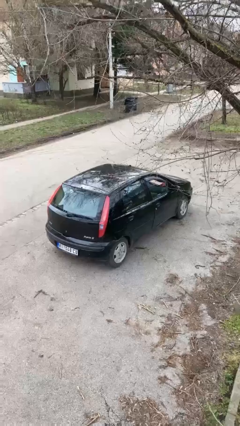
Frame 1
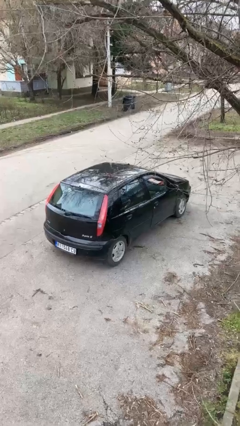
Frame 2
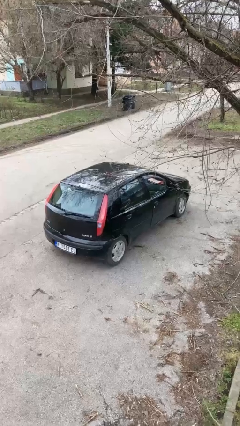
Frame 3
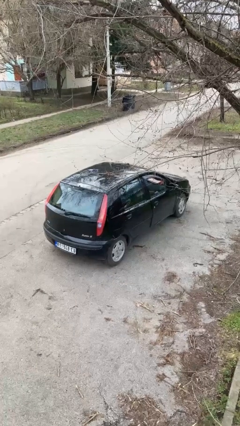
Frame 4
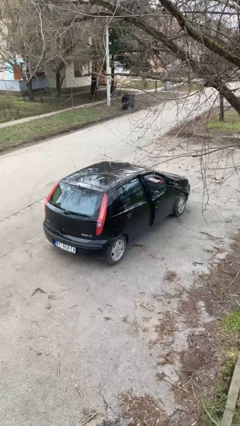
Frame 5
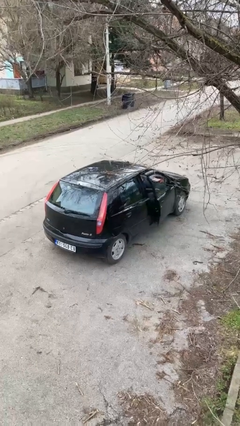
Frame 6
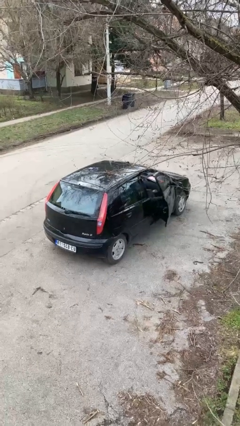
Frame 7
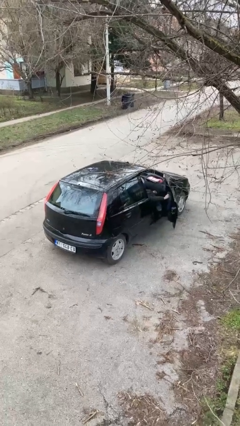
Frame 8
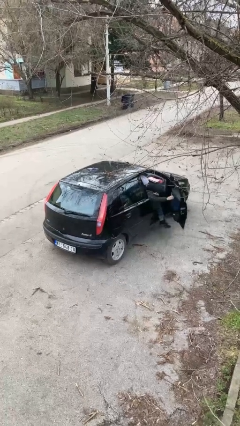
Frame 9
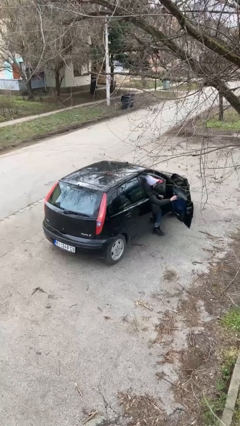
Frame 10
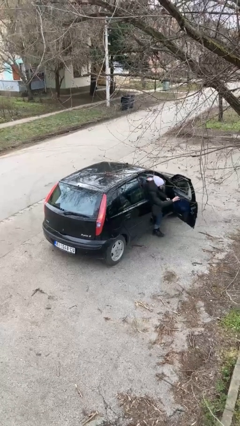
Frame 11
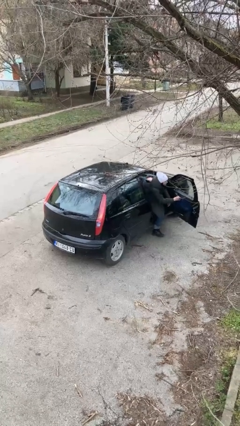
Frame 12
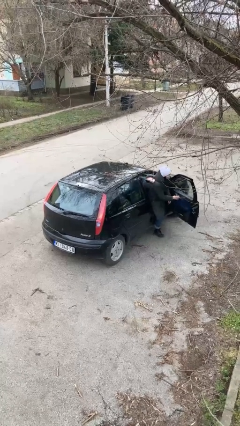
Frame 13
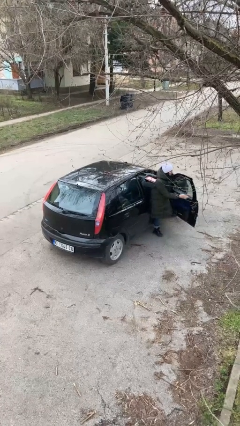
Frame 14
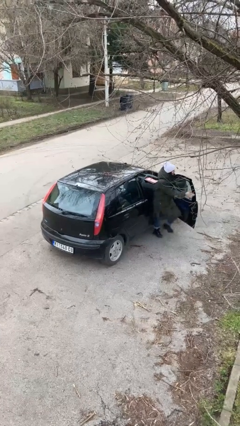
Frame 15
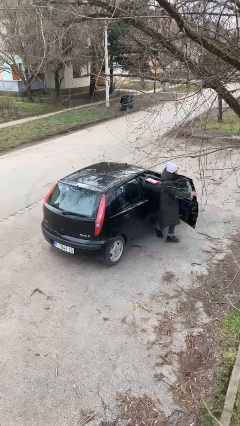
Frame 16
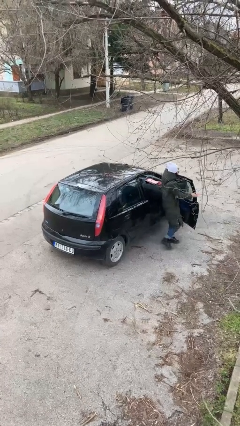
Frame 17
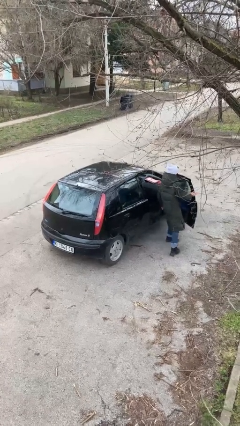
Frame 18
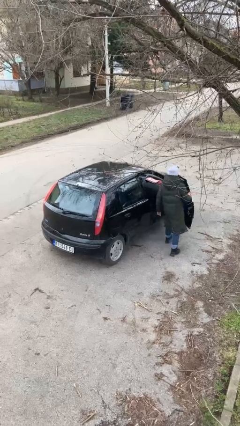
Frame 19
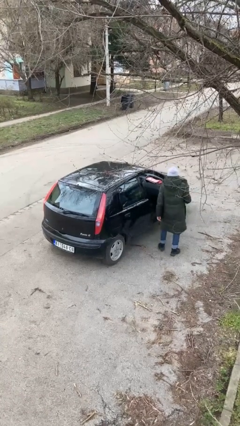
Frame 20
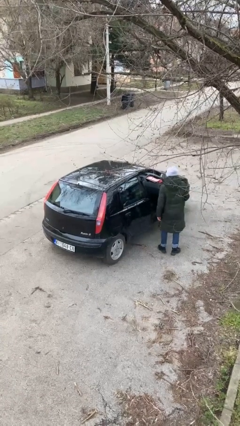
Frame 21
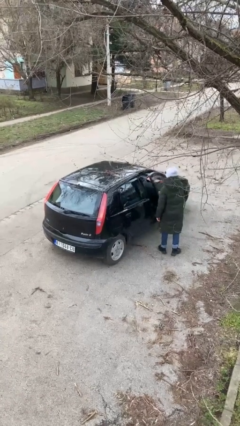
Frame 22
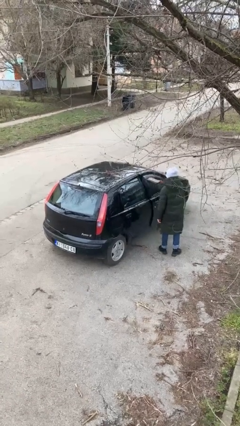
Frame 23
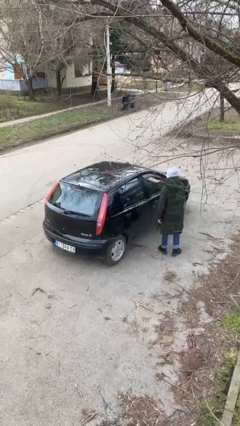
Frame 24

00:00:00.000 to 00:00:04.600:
car drops off person

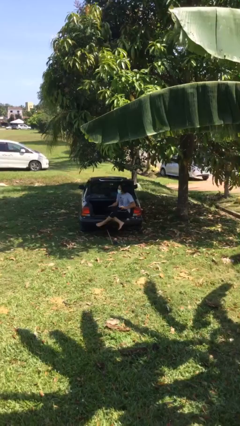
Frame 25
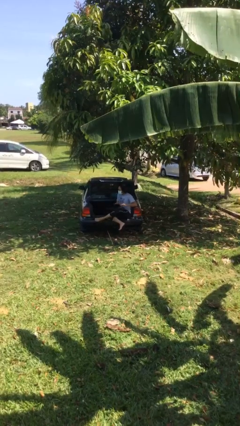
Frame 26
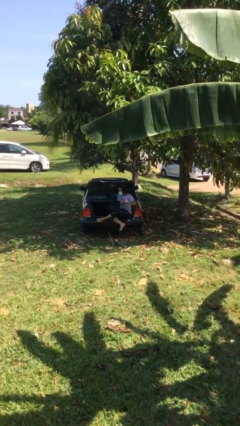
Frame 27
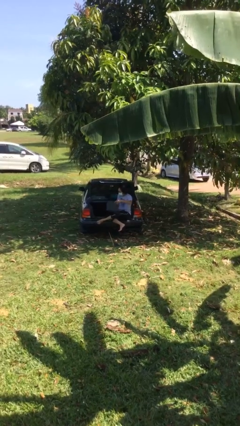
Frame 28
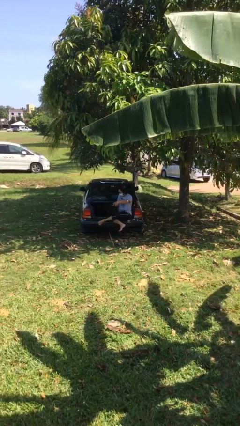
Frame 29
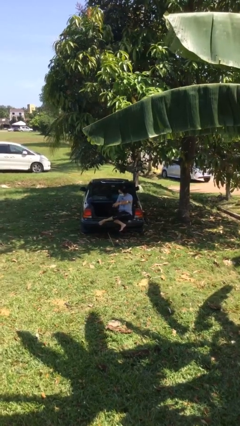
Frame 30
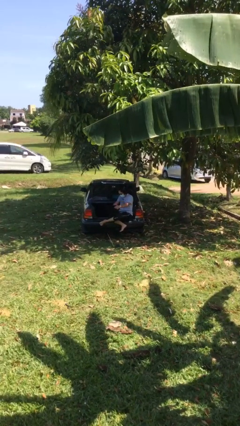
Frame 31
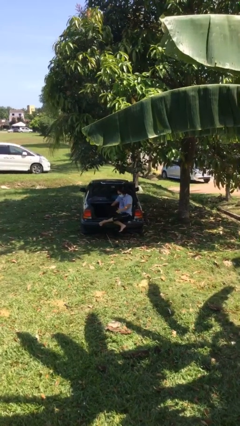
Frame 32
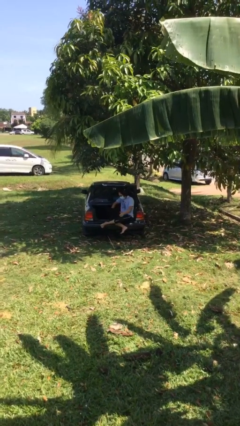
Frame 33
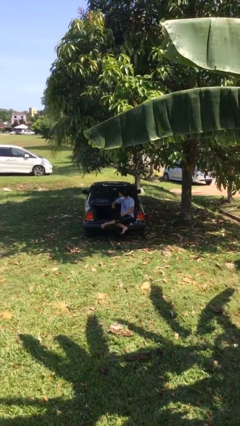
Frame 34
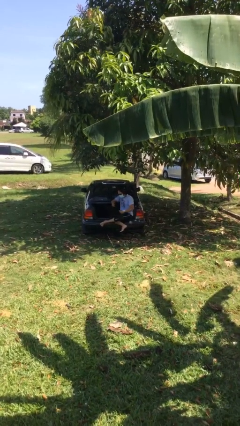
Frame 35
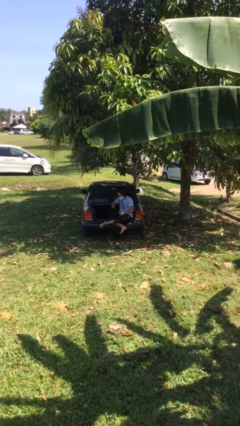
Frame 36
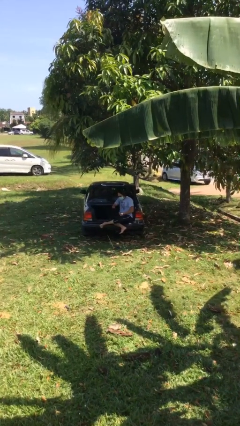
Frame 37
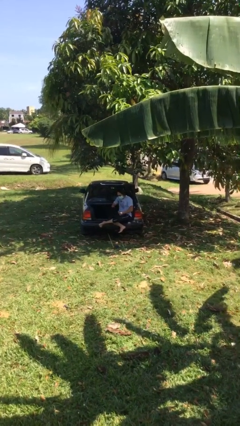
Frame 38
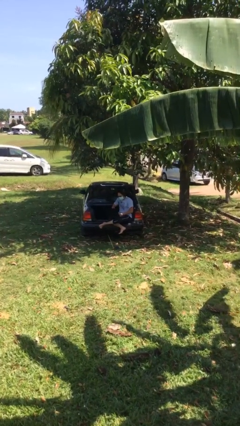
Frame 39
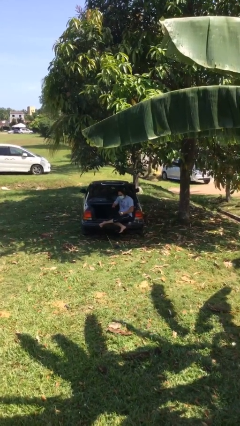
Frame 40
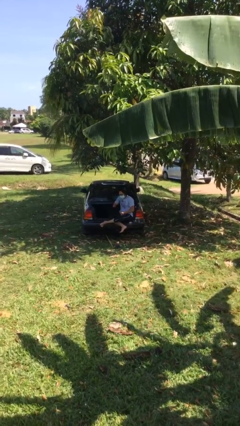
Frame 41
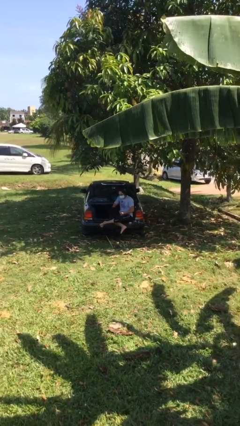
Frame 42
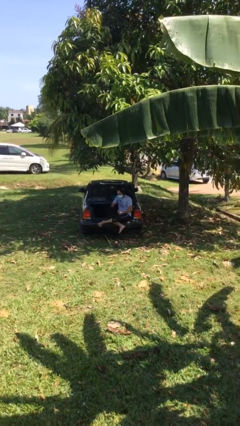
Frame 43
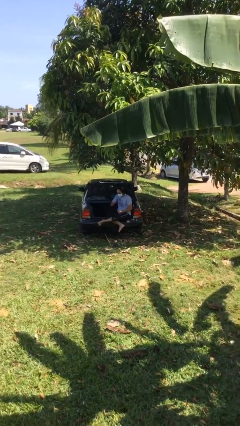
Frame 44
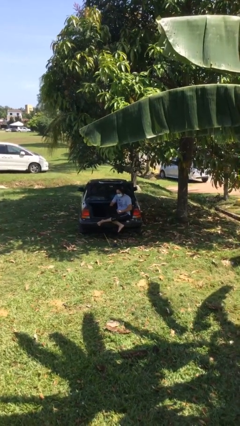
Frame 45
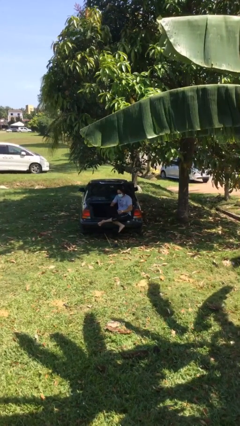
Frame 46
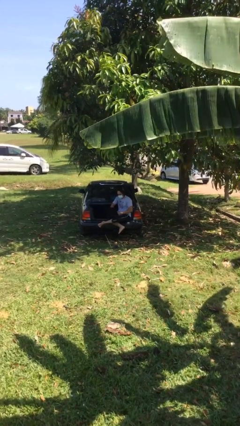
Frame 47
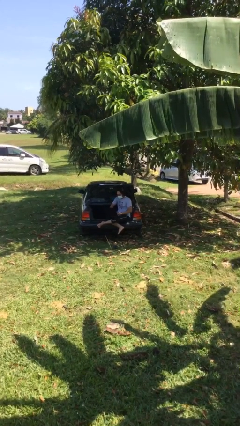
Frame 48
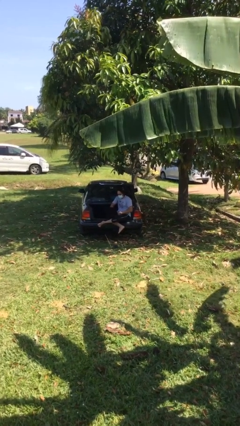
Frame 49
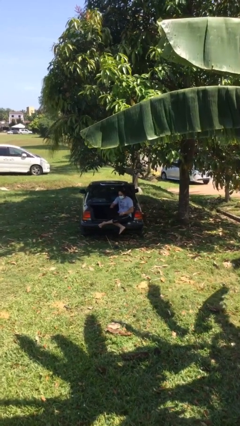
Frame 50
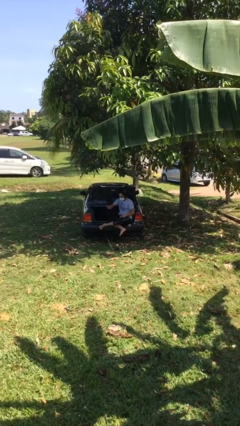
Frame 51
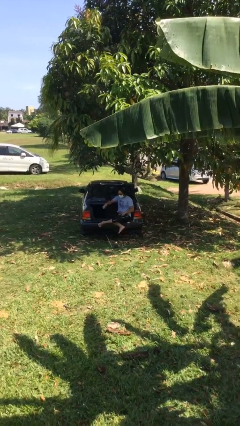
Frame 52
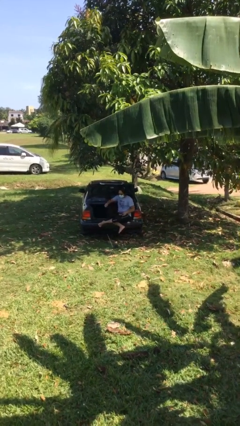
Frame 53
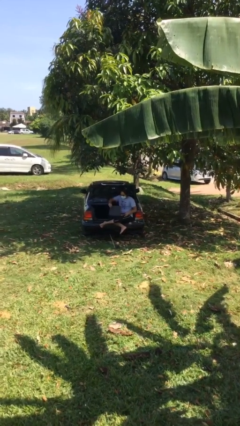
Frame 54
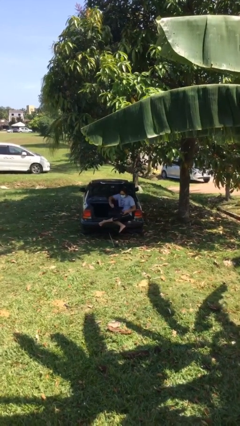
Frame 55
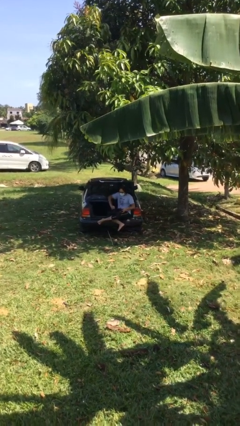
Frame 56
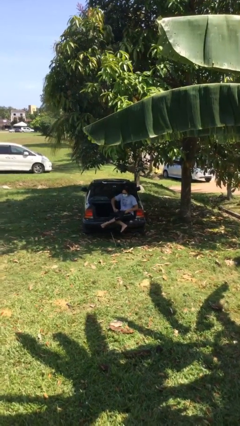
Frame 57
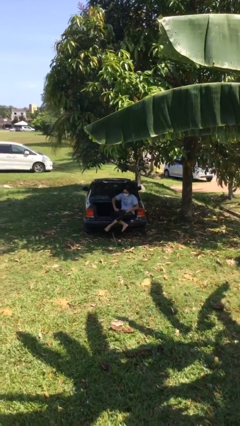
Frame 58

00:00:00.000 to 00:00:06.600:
person interacts with laptop

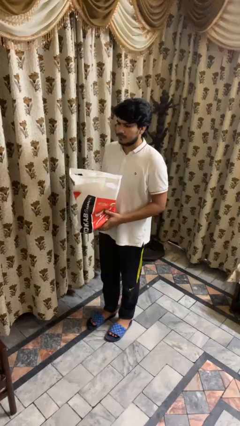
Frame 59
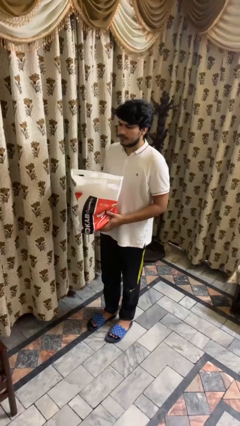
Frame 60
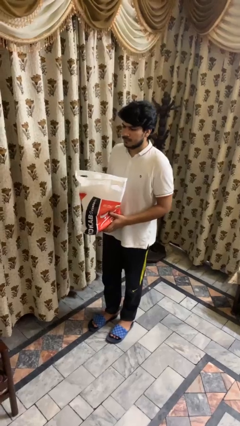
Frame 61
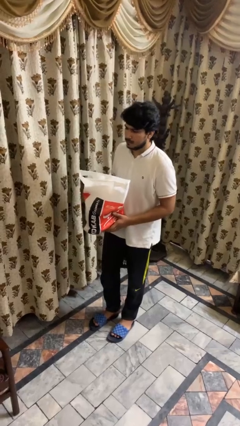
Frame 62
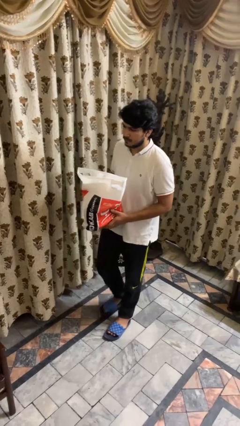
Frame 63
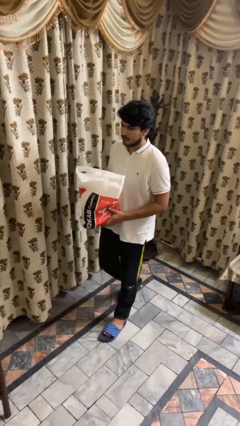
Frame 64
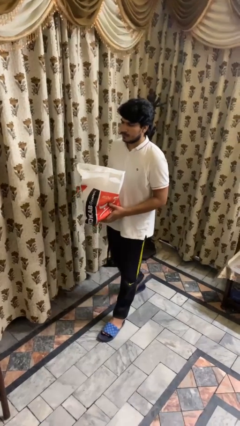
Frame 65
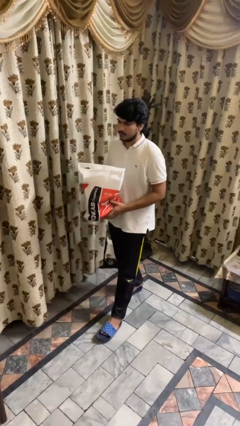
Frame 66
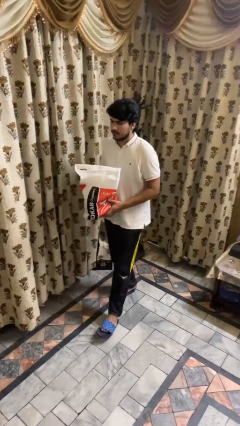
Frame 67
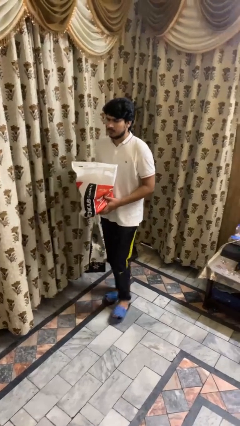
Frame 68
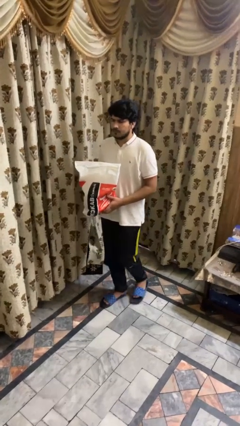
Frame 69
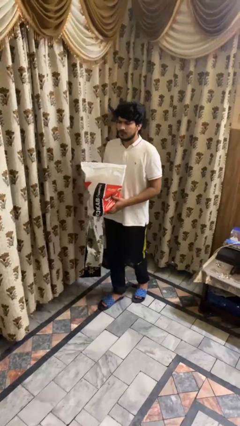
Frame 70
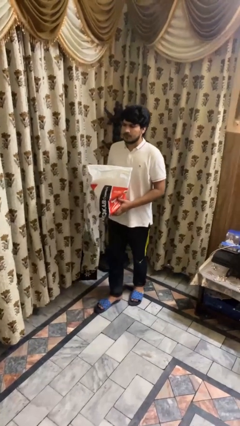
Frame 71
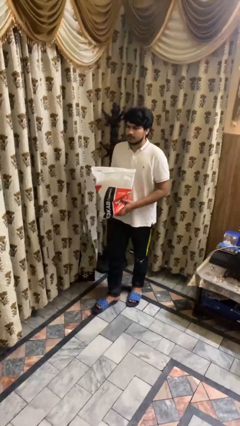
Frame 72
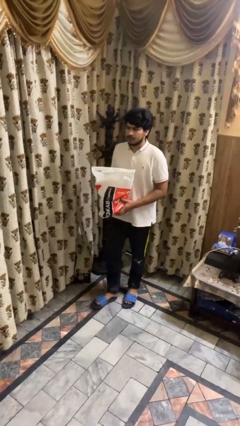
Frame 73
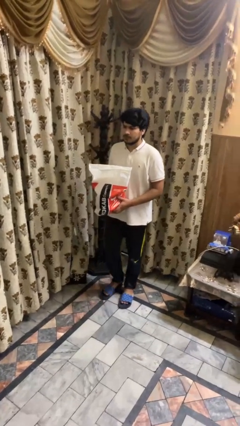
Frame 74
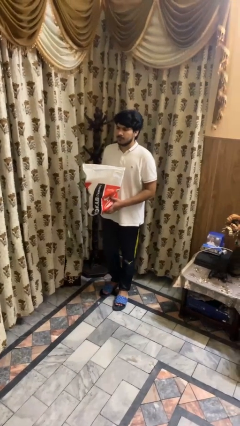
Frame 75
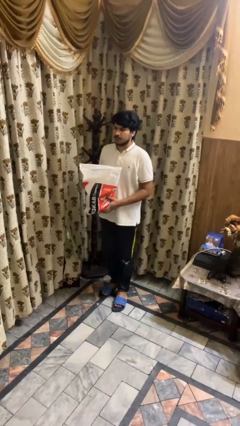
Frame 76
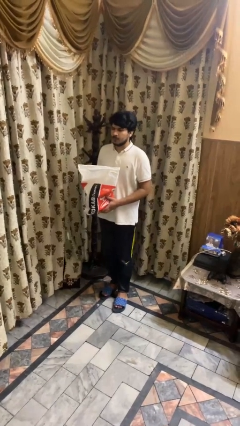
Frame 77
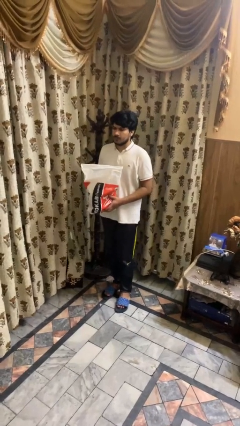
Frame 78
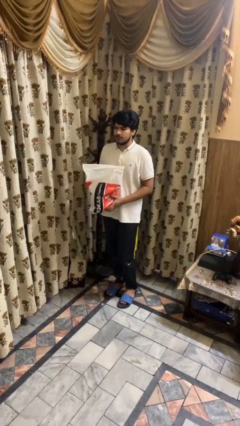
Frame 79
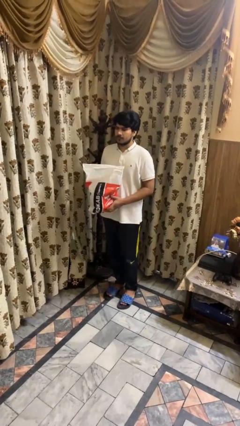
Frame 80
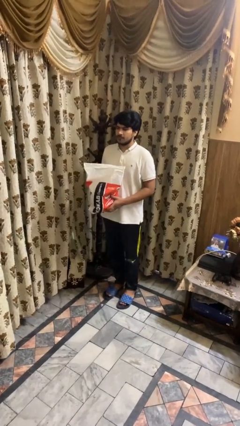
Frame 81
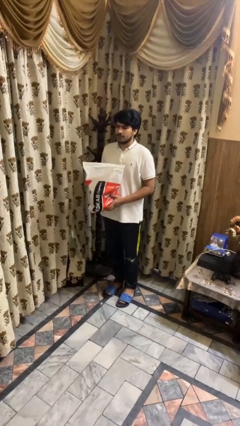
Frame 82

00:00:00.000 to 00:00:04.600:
person carries groceries

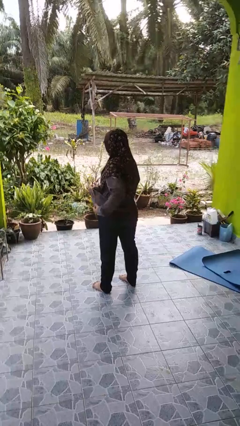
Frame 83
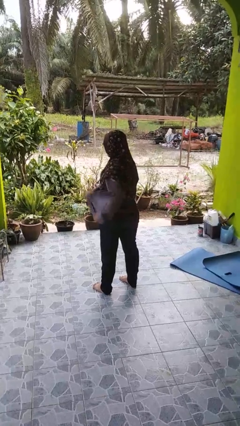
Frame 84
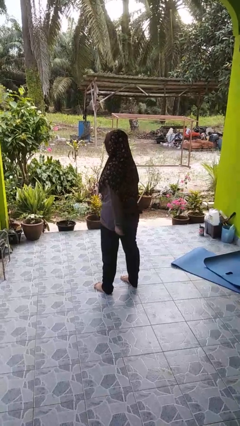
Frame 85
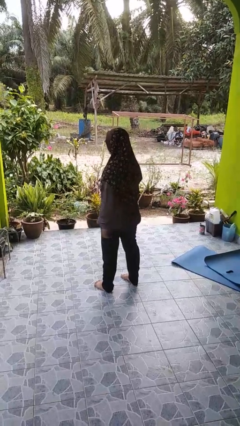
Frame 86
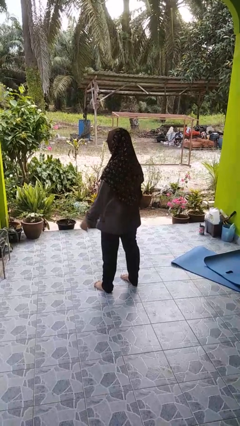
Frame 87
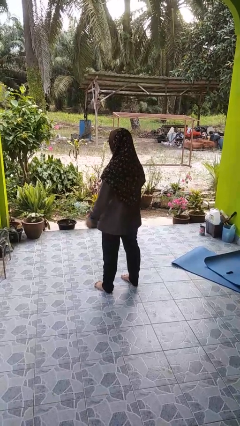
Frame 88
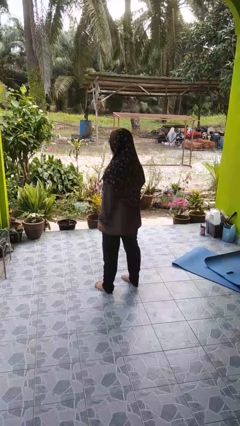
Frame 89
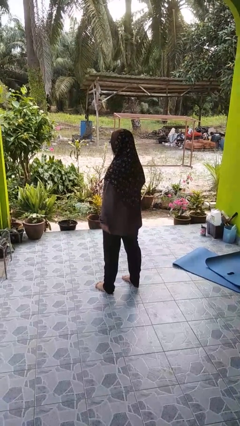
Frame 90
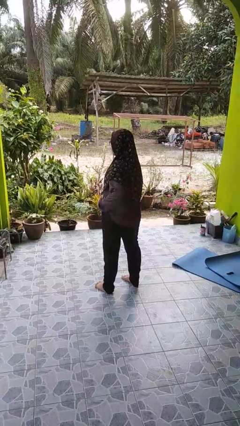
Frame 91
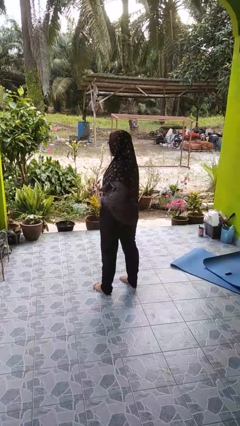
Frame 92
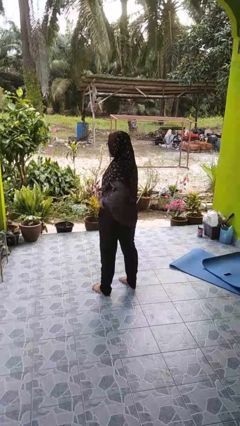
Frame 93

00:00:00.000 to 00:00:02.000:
person untucks shirt
